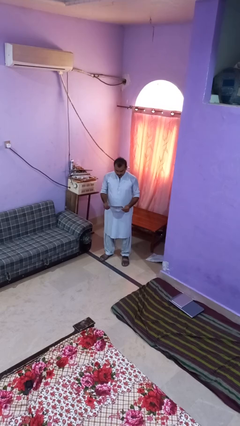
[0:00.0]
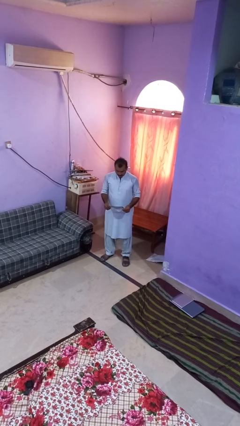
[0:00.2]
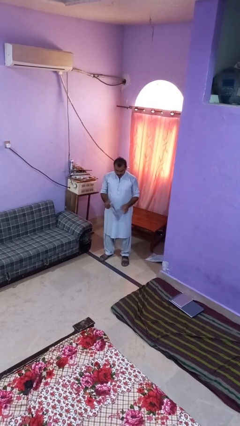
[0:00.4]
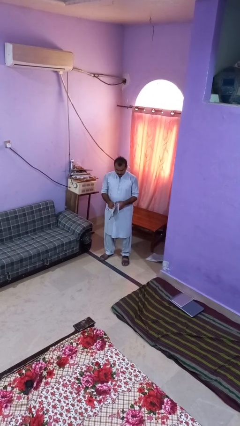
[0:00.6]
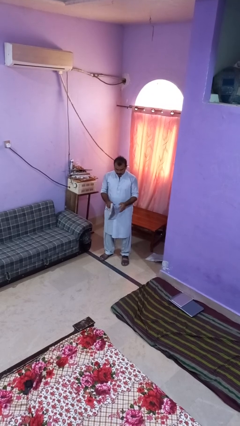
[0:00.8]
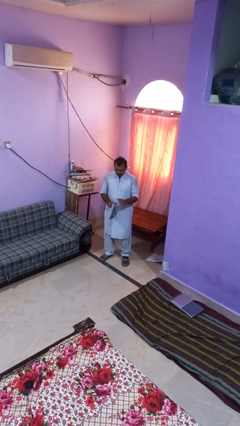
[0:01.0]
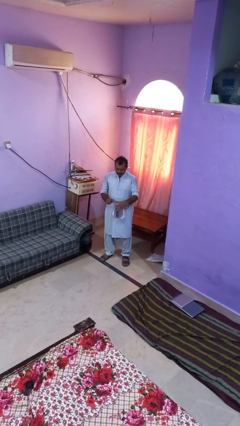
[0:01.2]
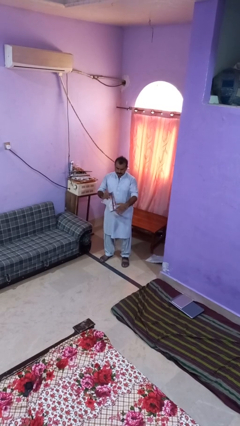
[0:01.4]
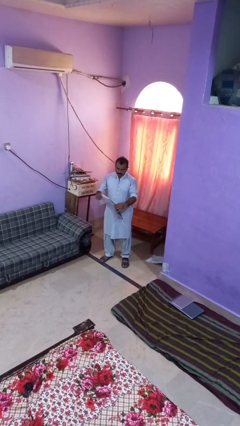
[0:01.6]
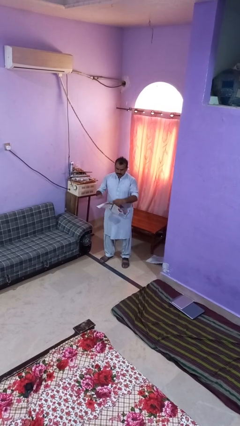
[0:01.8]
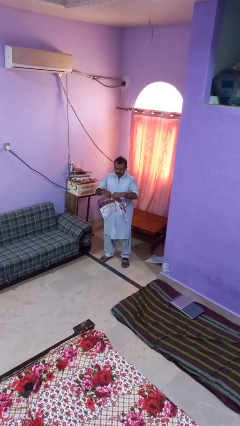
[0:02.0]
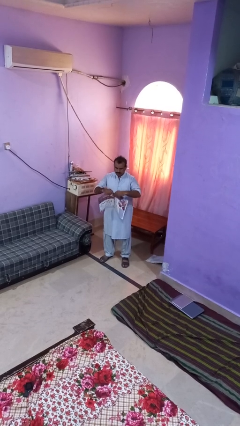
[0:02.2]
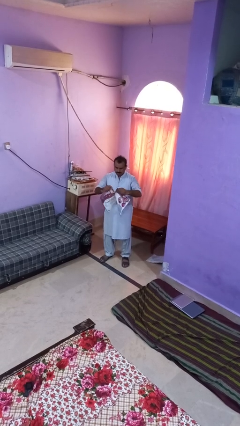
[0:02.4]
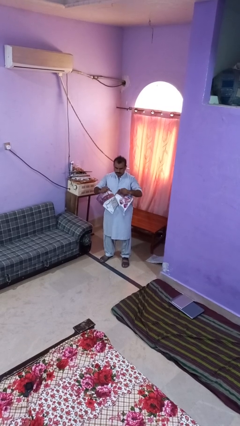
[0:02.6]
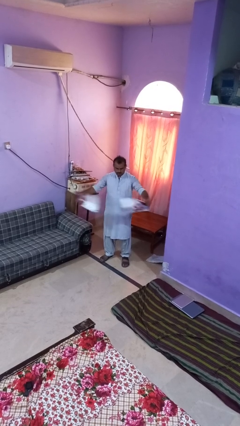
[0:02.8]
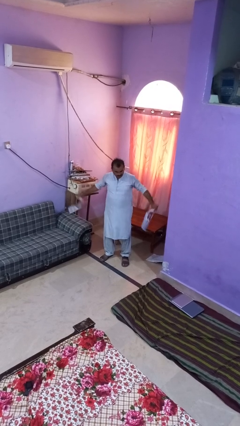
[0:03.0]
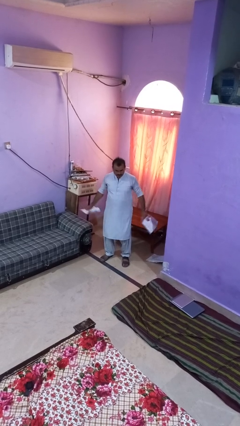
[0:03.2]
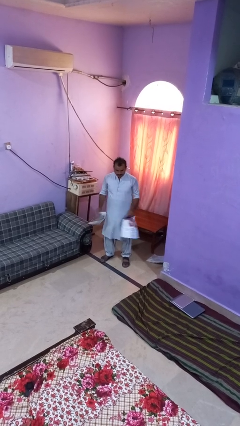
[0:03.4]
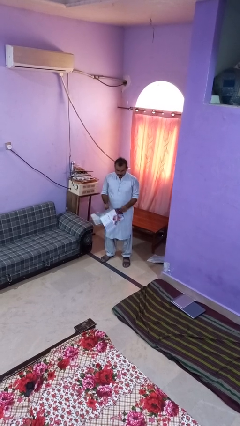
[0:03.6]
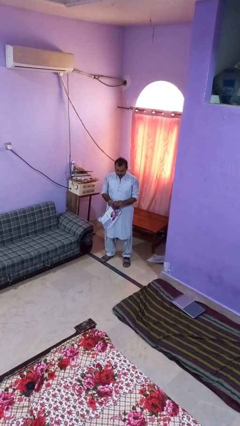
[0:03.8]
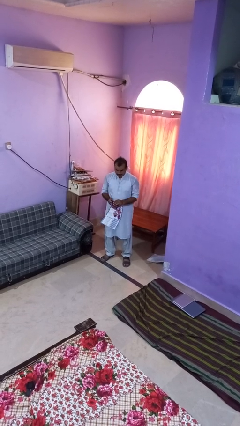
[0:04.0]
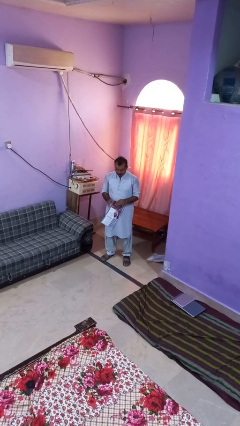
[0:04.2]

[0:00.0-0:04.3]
person tears paper

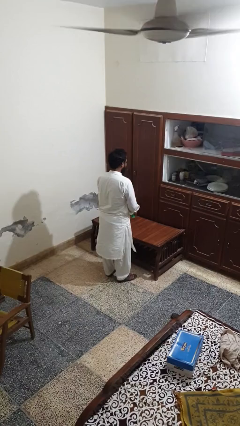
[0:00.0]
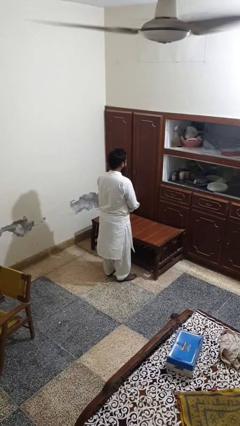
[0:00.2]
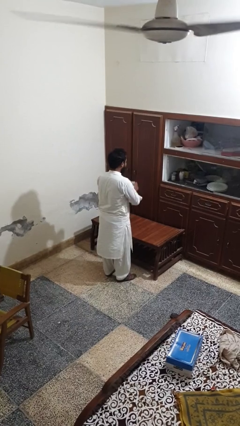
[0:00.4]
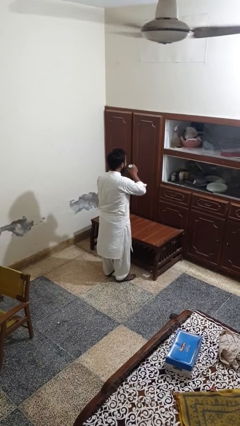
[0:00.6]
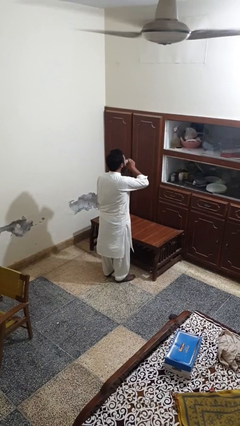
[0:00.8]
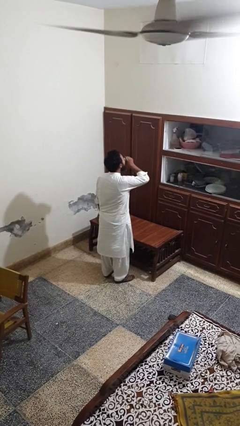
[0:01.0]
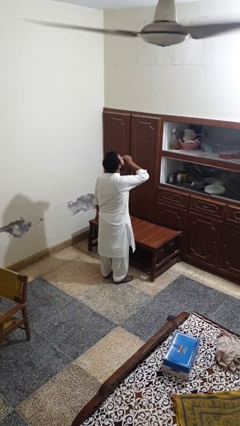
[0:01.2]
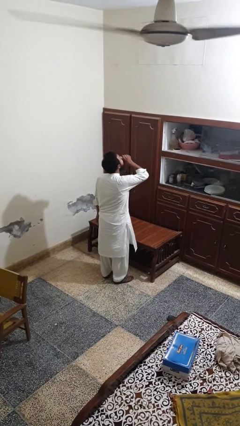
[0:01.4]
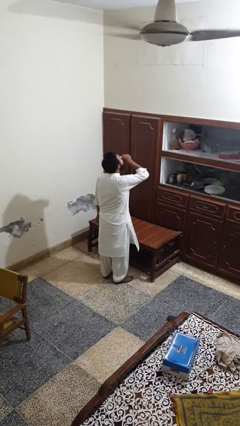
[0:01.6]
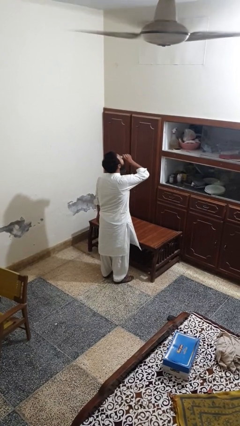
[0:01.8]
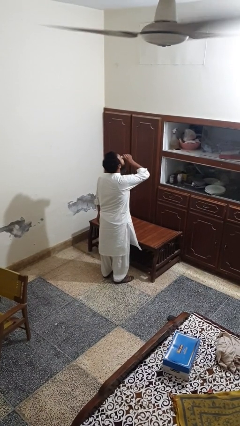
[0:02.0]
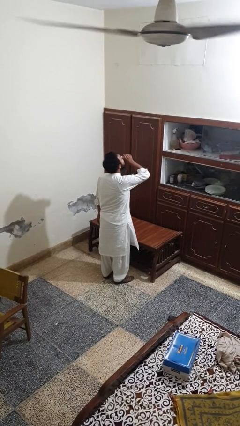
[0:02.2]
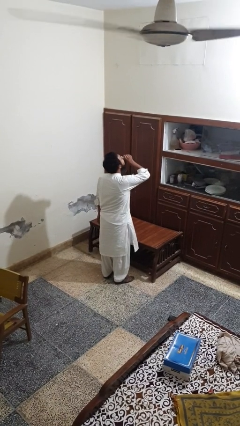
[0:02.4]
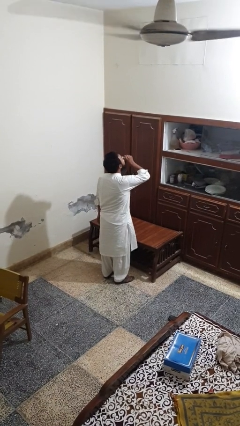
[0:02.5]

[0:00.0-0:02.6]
person drinks from beverage can

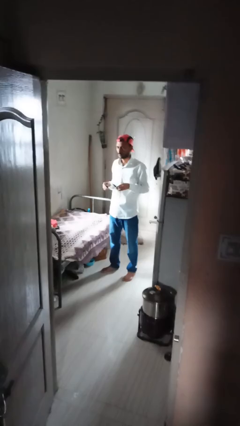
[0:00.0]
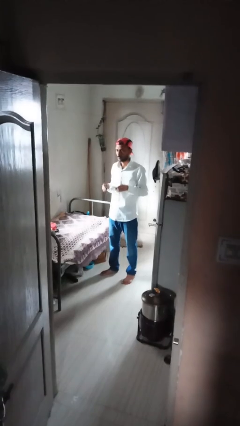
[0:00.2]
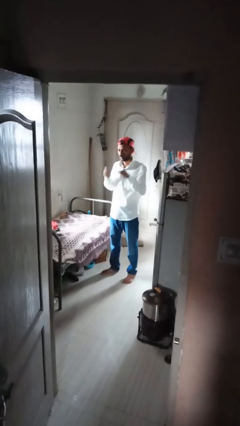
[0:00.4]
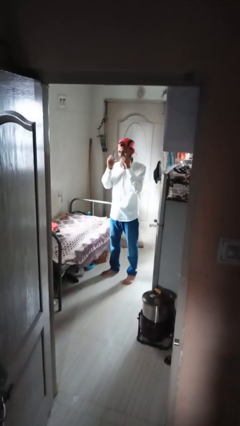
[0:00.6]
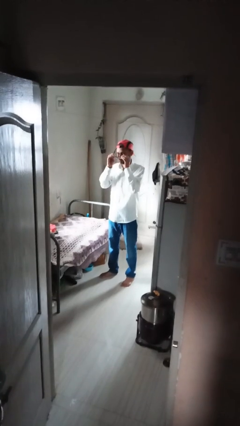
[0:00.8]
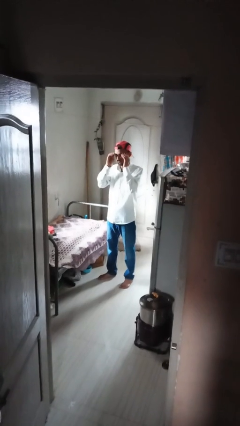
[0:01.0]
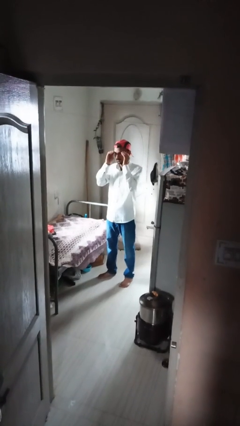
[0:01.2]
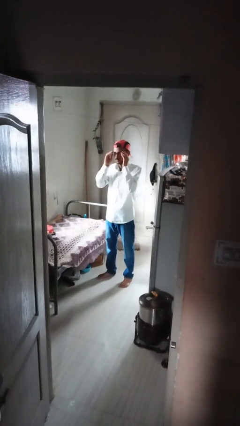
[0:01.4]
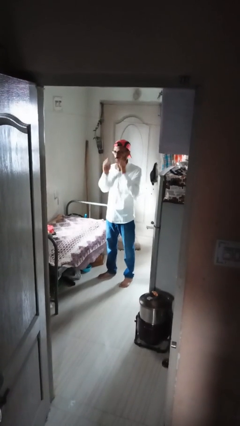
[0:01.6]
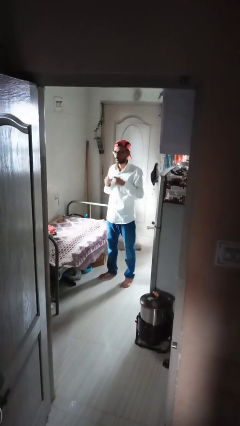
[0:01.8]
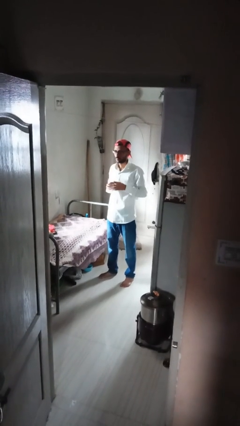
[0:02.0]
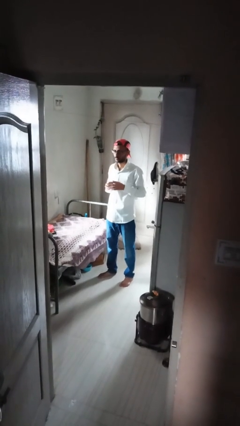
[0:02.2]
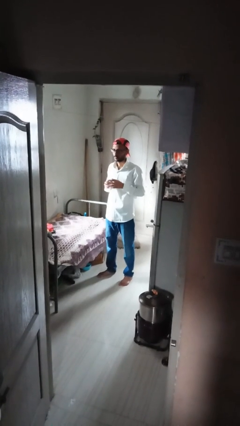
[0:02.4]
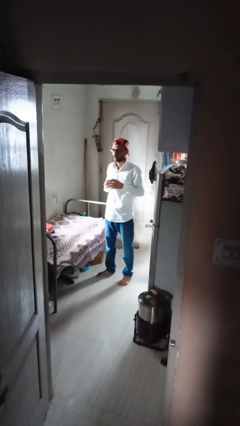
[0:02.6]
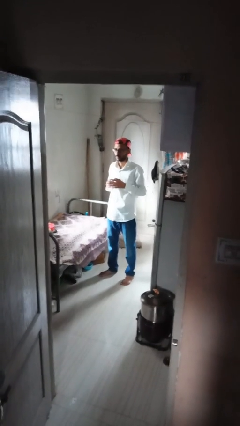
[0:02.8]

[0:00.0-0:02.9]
person puts on glasses

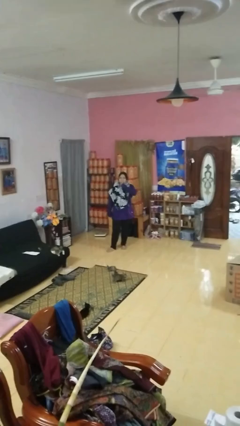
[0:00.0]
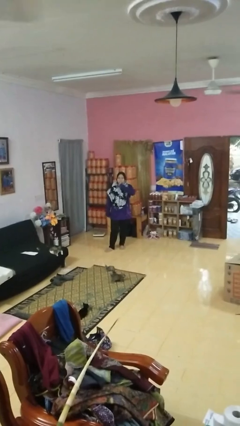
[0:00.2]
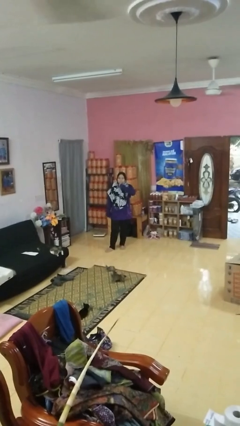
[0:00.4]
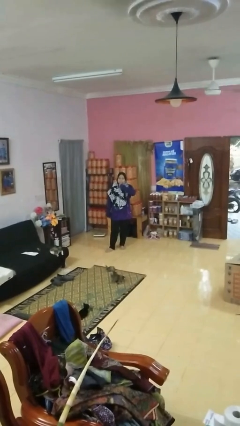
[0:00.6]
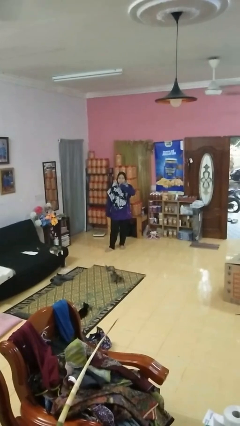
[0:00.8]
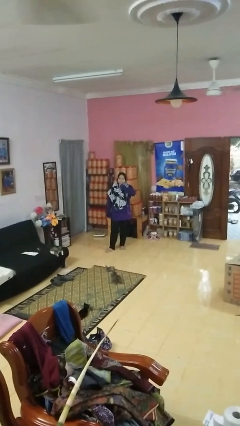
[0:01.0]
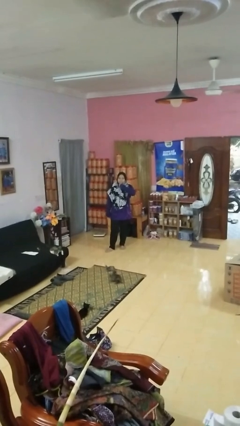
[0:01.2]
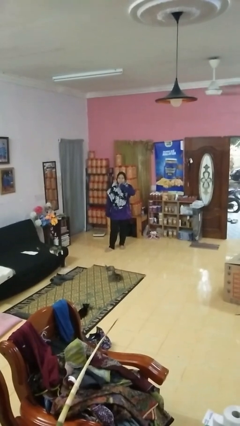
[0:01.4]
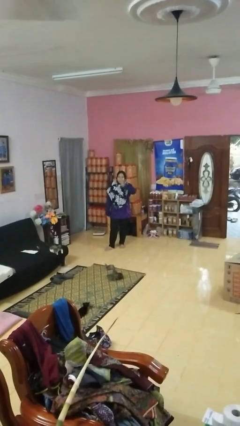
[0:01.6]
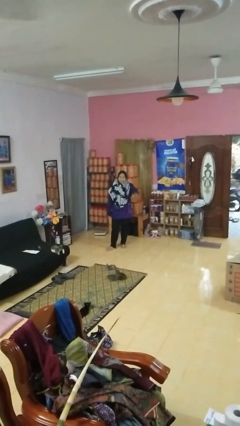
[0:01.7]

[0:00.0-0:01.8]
person gestures be quiet

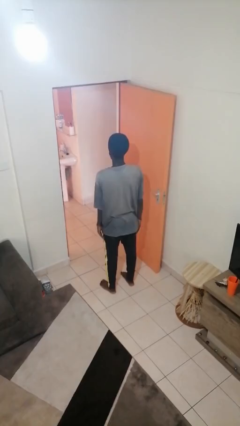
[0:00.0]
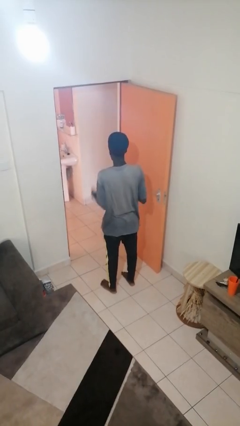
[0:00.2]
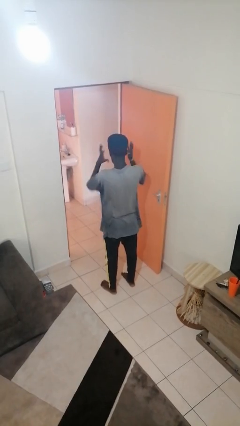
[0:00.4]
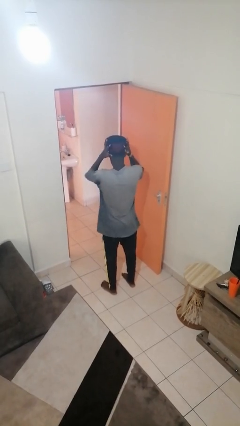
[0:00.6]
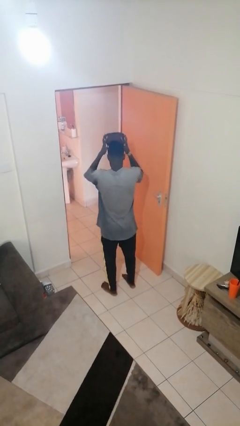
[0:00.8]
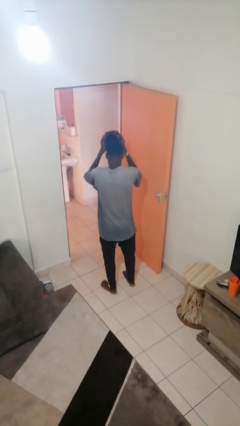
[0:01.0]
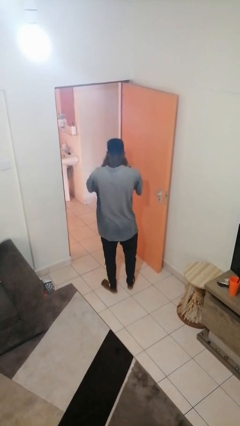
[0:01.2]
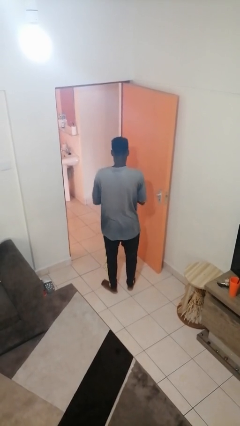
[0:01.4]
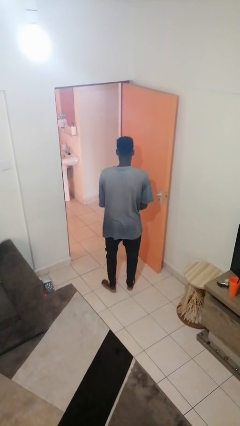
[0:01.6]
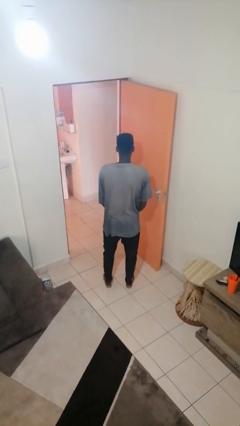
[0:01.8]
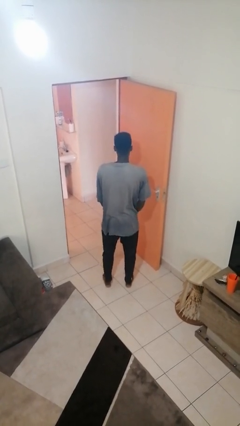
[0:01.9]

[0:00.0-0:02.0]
person takes off hat

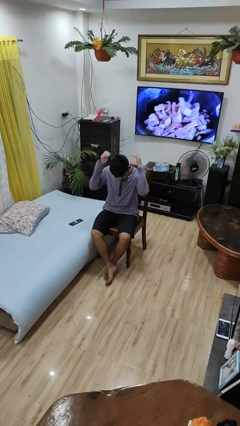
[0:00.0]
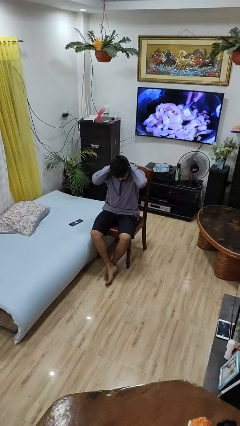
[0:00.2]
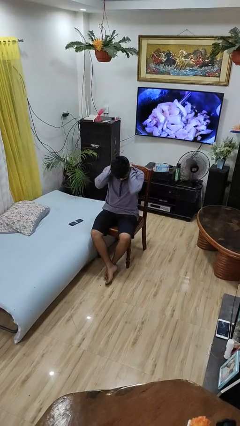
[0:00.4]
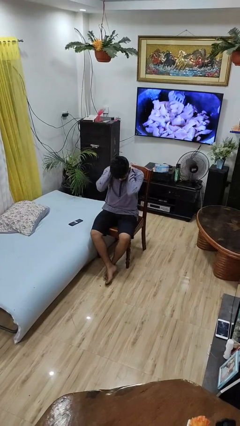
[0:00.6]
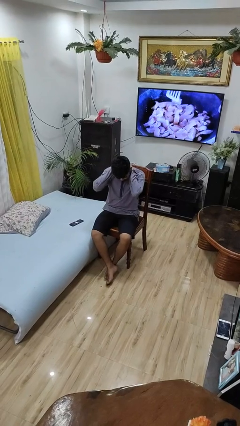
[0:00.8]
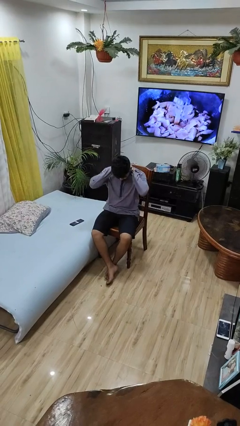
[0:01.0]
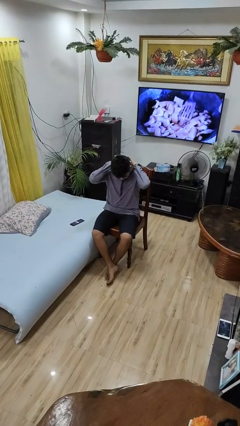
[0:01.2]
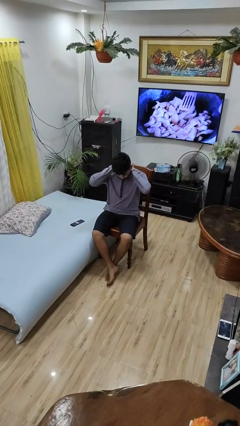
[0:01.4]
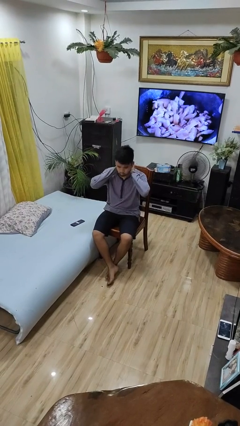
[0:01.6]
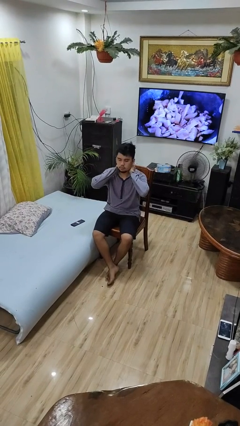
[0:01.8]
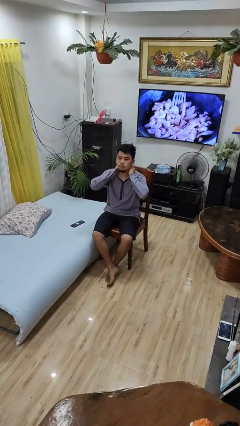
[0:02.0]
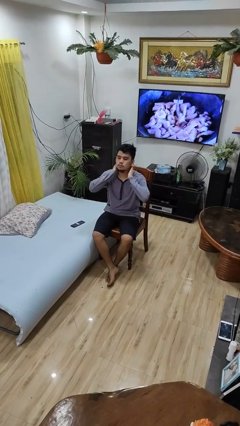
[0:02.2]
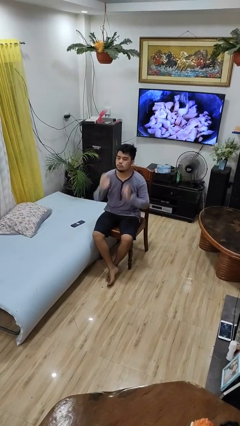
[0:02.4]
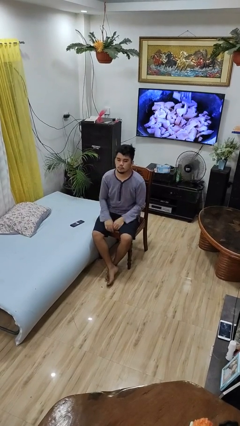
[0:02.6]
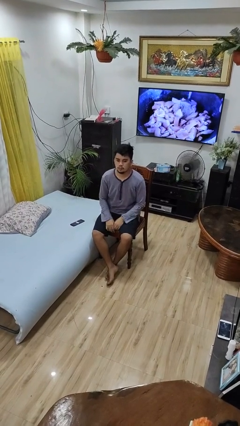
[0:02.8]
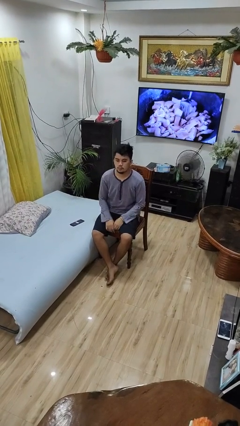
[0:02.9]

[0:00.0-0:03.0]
person rubs neck

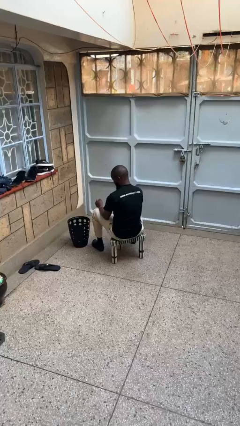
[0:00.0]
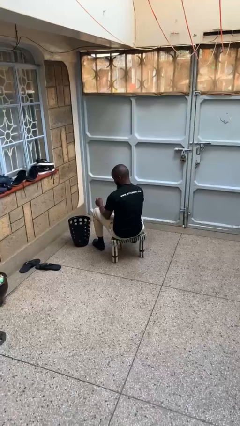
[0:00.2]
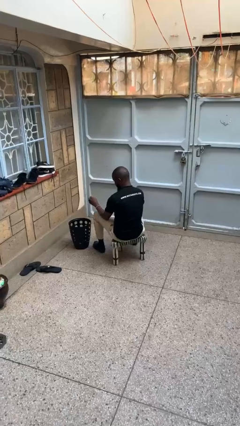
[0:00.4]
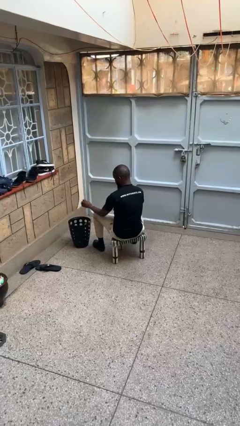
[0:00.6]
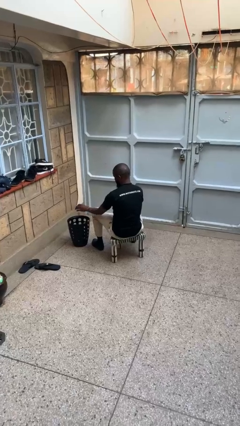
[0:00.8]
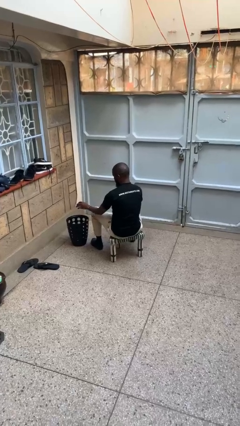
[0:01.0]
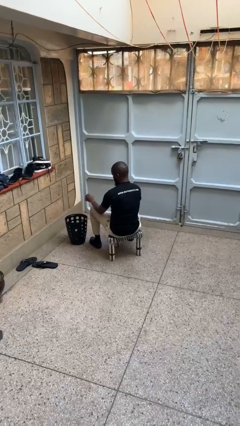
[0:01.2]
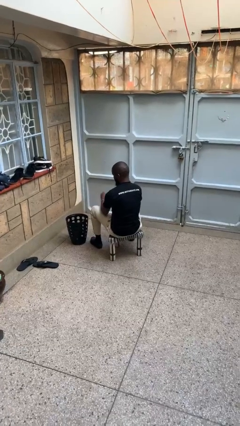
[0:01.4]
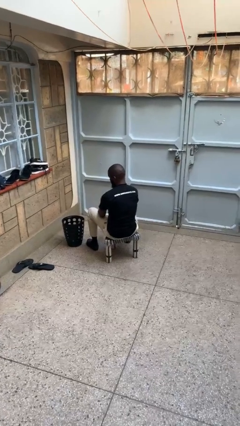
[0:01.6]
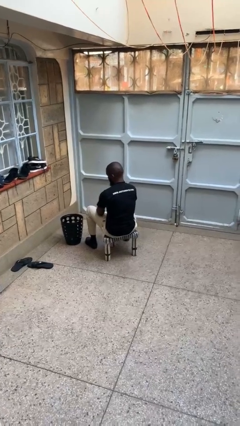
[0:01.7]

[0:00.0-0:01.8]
person discards trash
